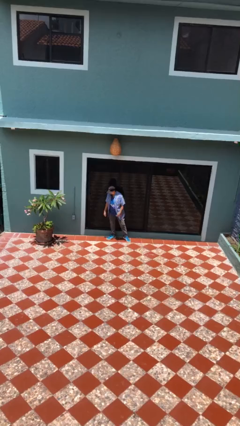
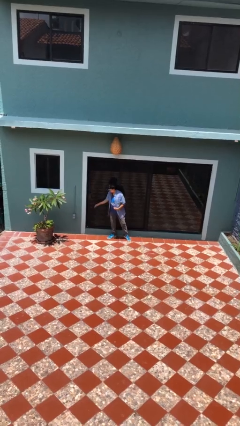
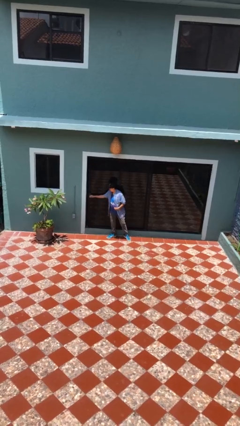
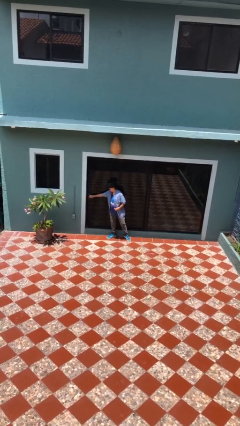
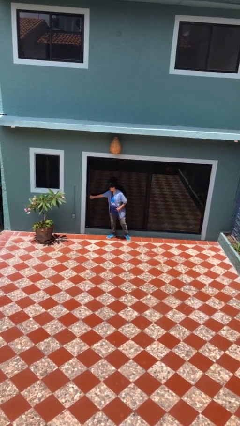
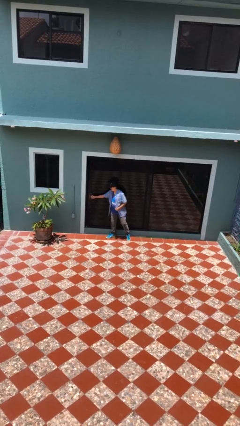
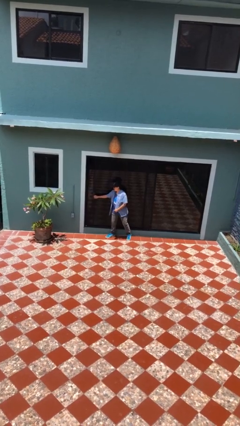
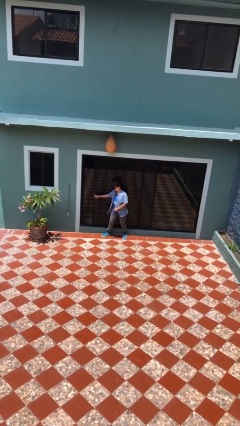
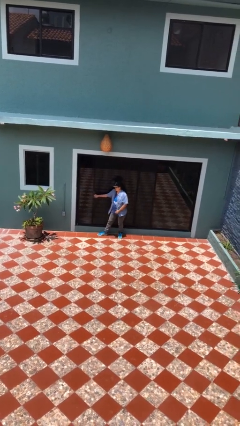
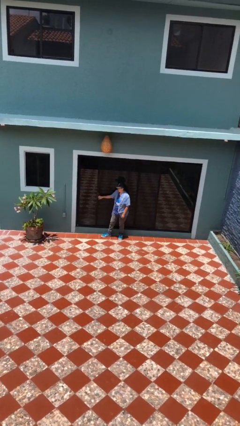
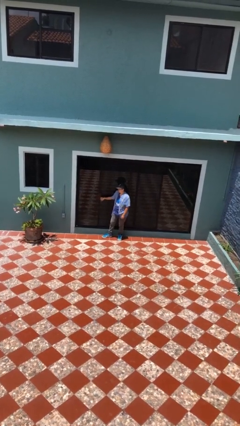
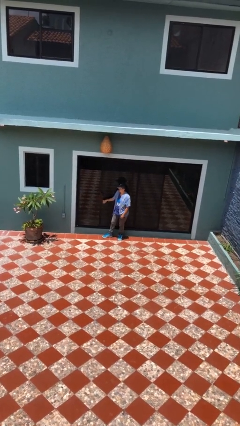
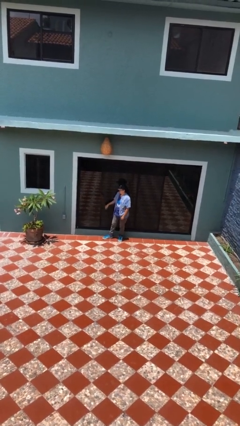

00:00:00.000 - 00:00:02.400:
person opens sliding door

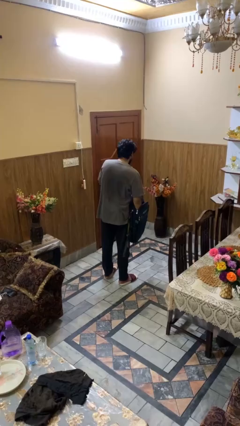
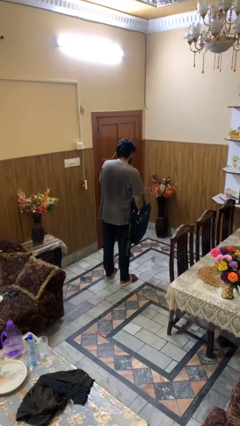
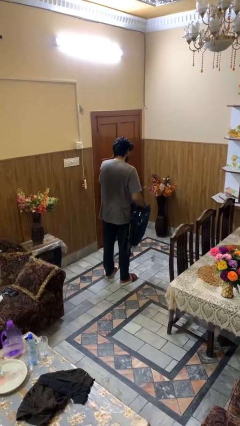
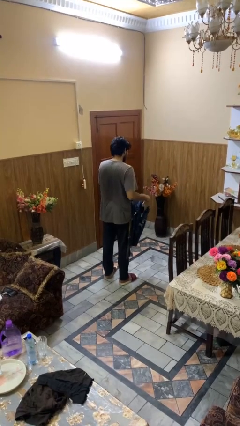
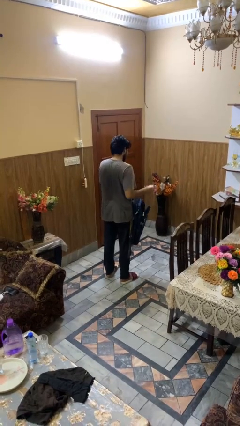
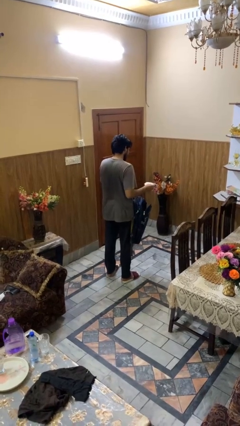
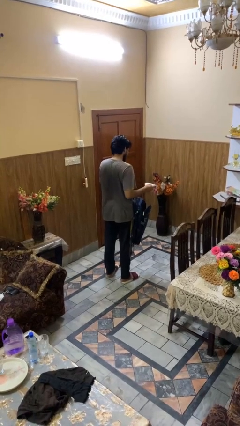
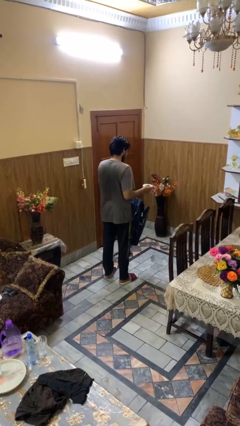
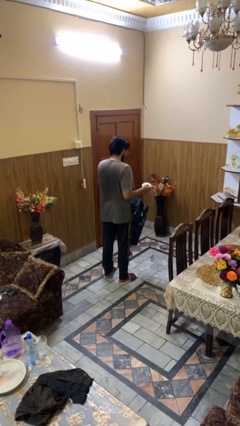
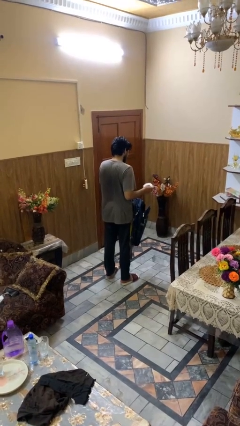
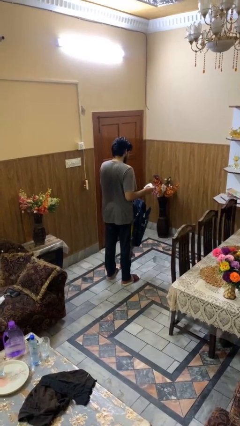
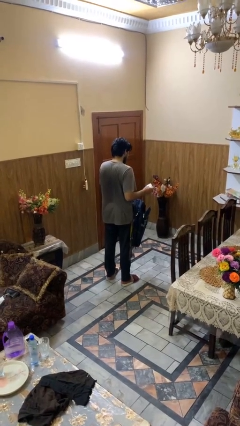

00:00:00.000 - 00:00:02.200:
person takes object from backpack

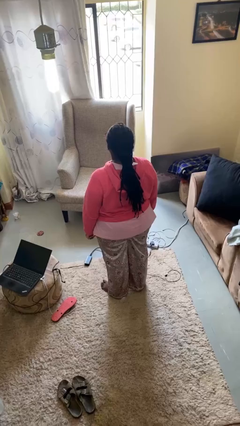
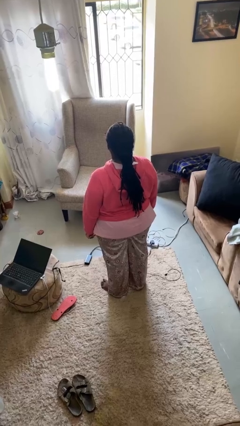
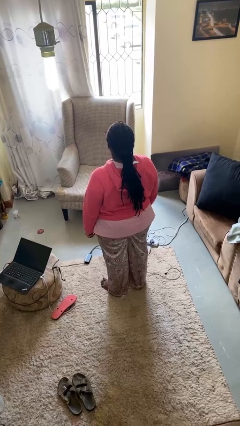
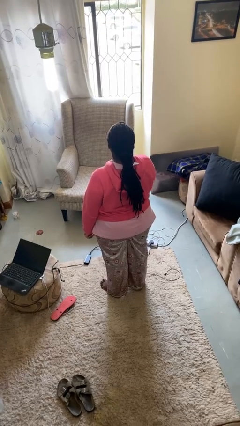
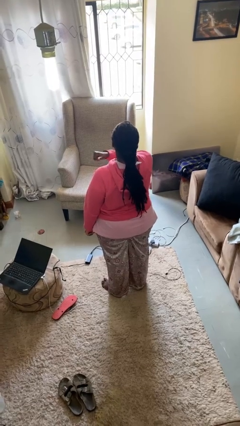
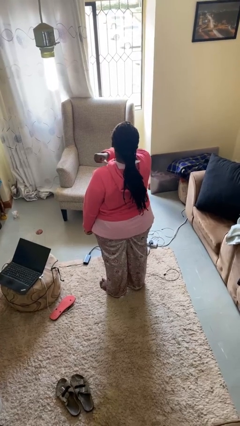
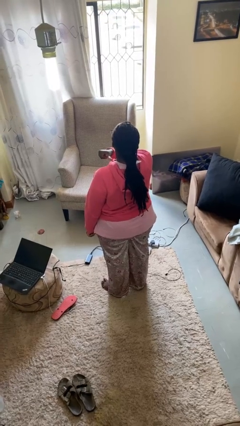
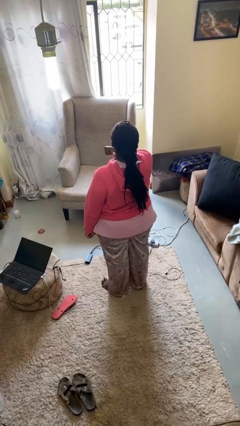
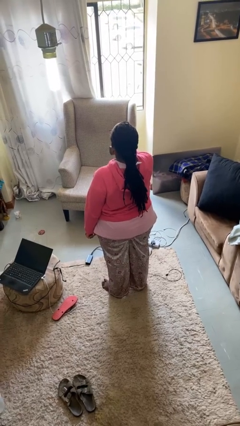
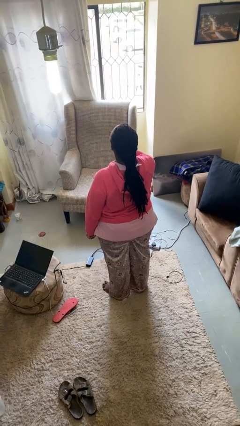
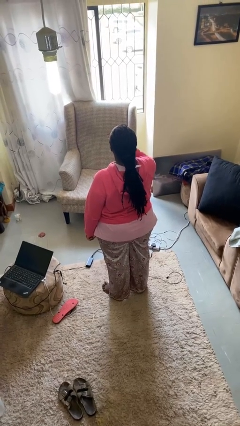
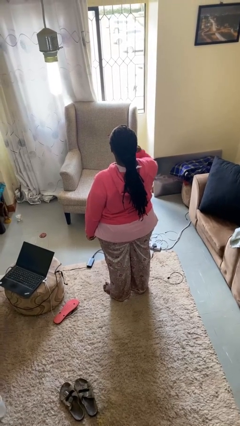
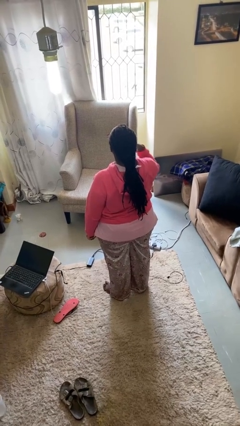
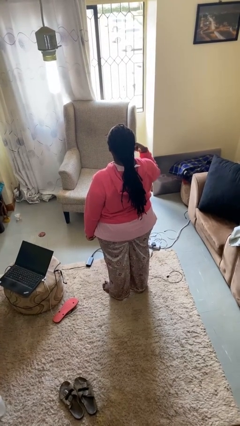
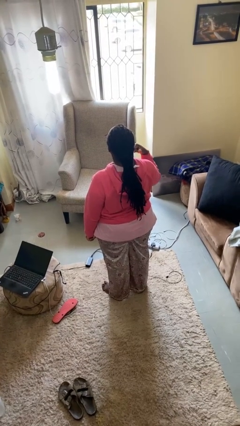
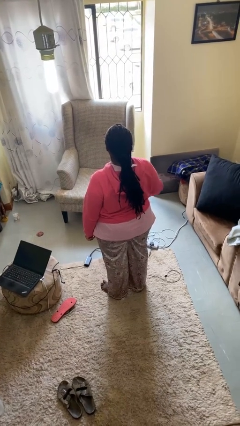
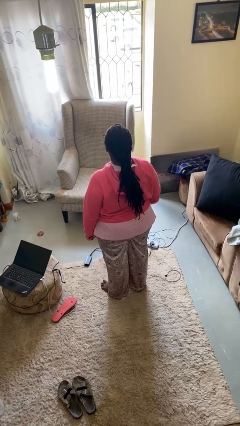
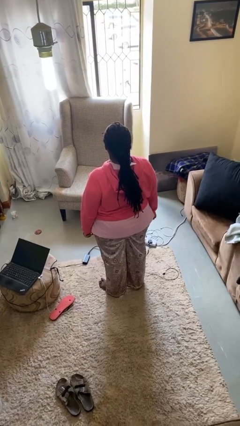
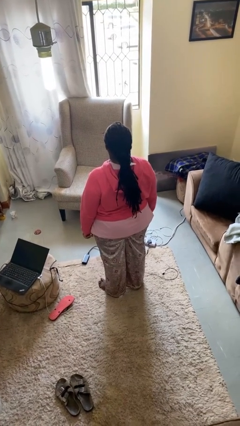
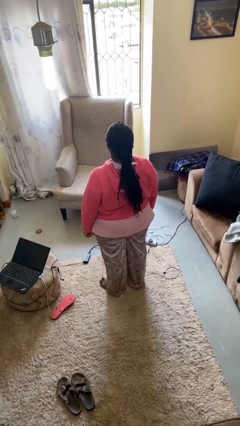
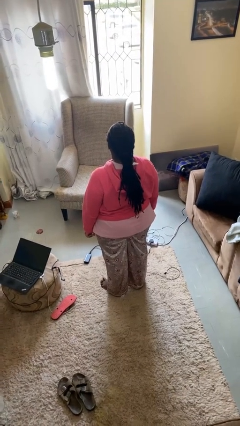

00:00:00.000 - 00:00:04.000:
person gestures cut

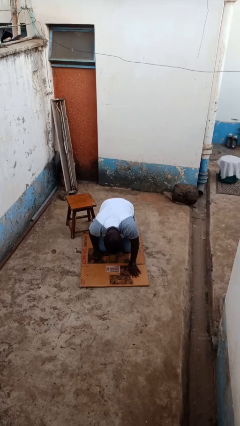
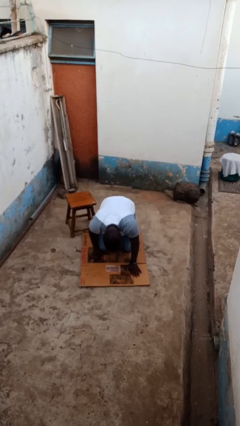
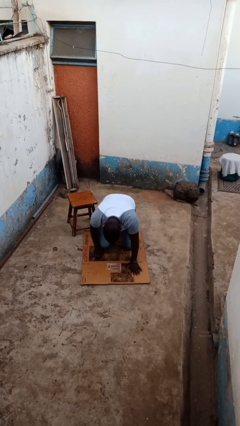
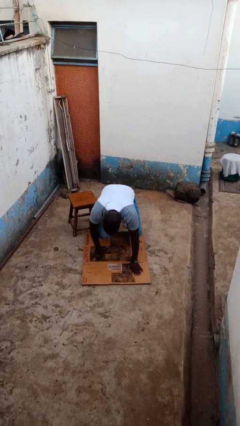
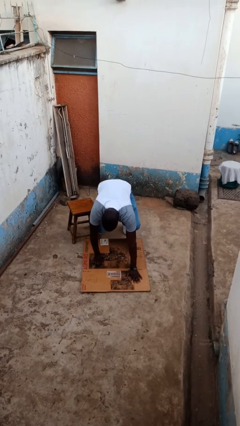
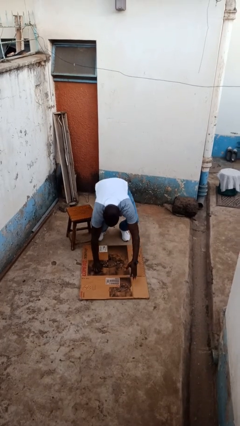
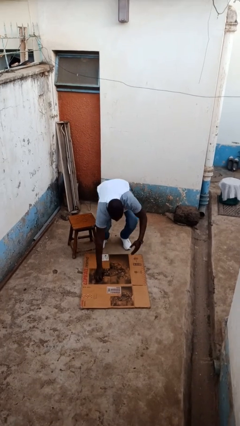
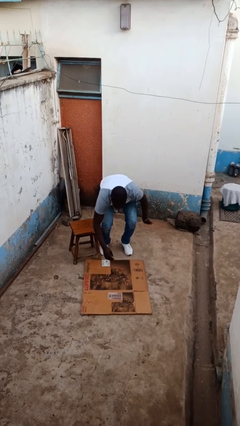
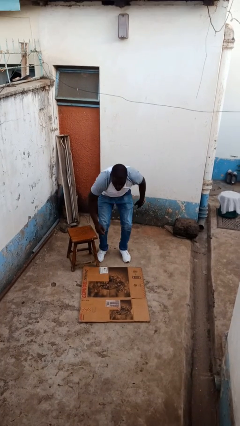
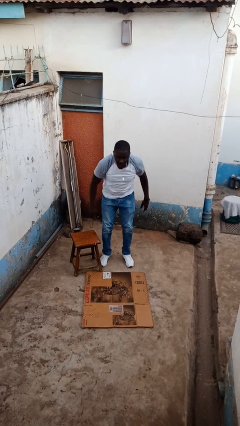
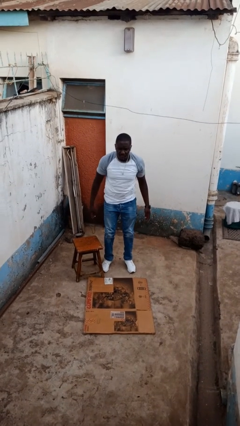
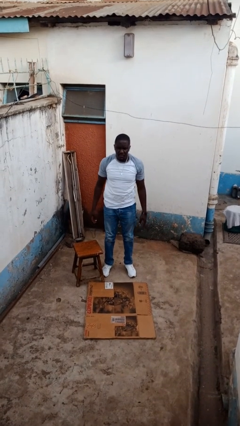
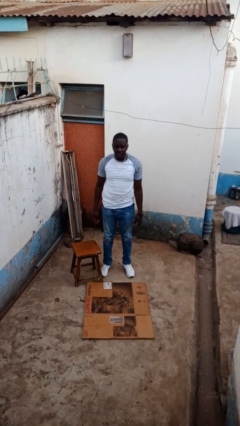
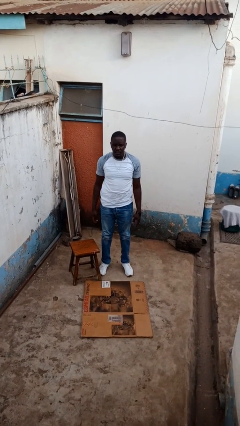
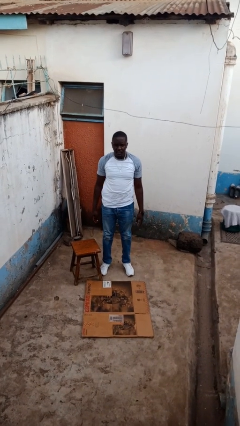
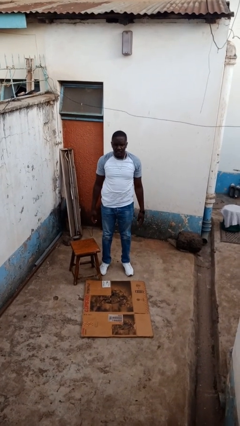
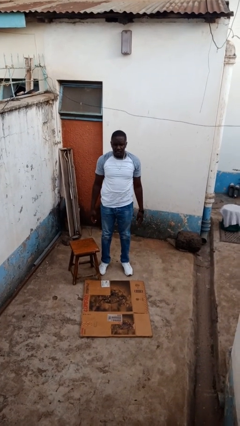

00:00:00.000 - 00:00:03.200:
person stands up from floor

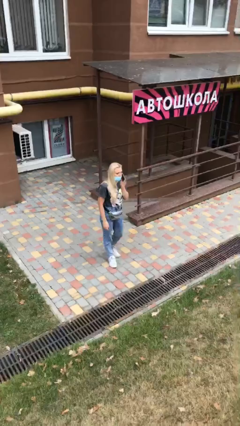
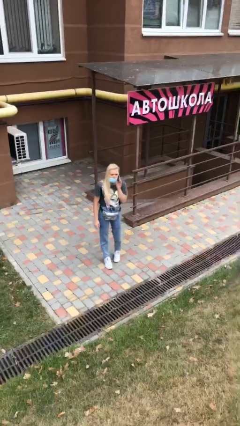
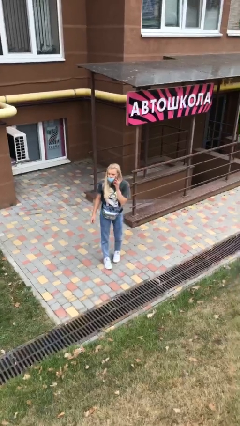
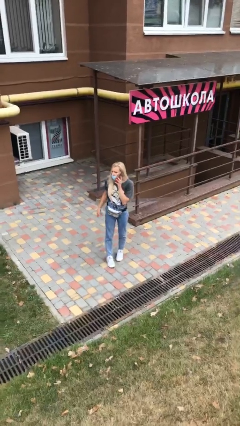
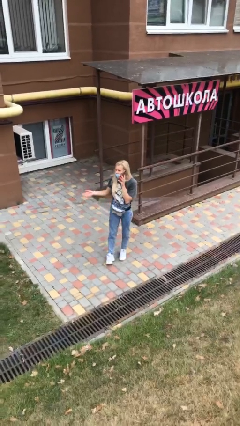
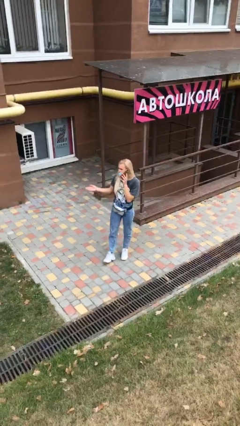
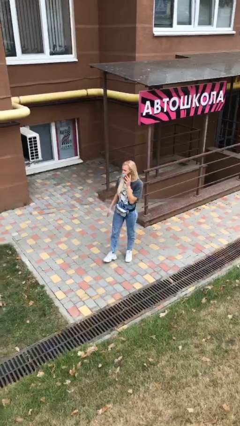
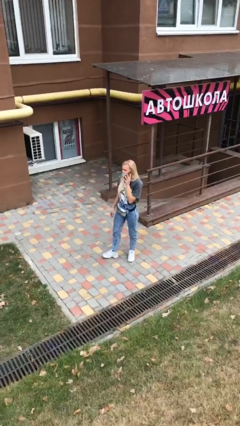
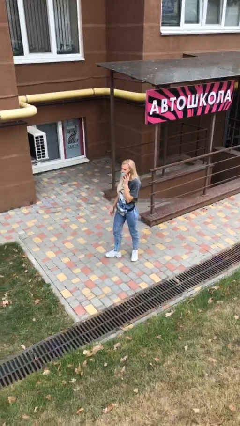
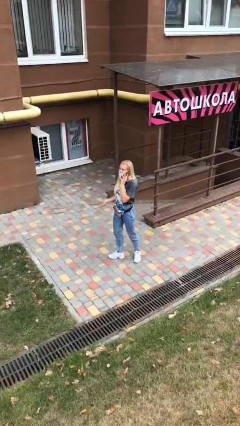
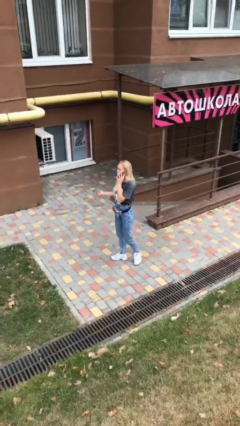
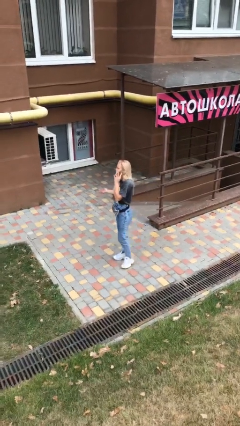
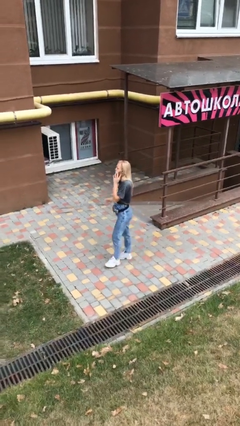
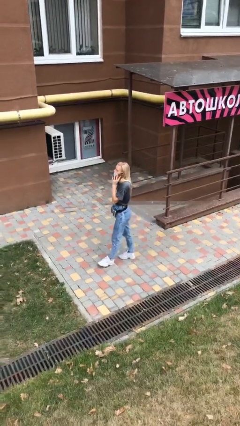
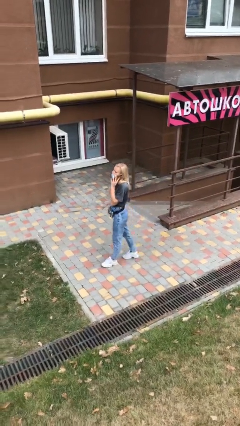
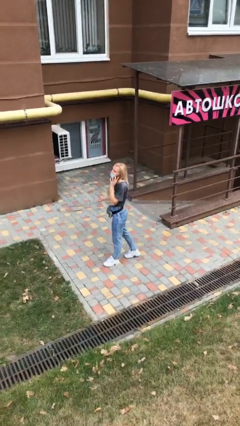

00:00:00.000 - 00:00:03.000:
person talks on phone

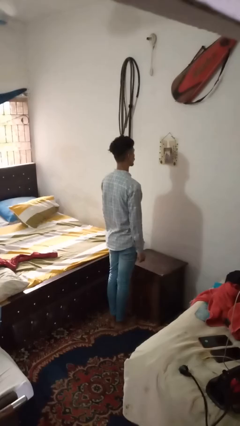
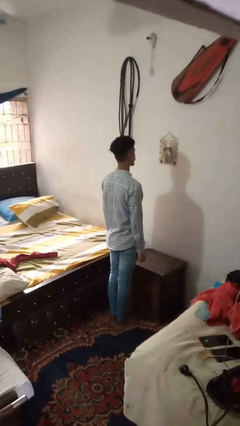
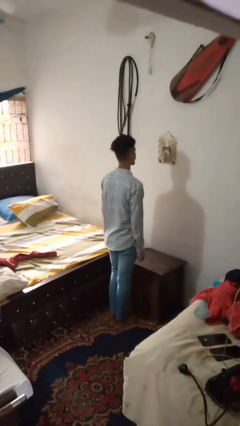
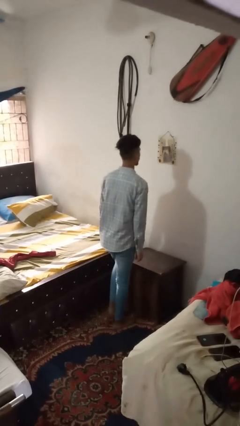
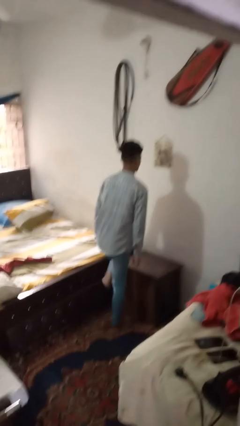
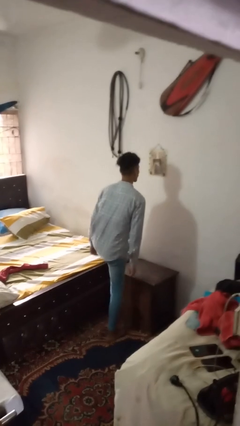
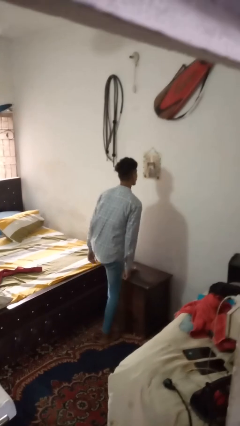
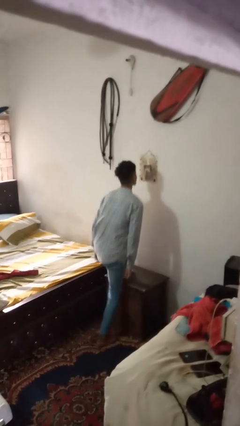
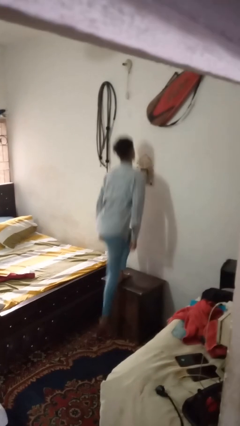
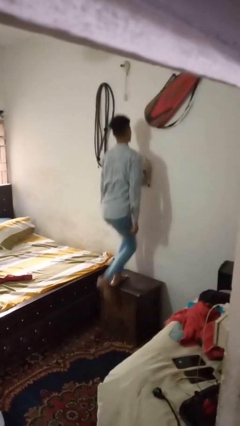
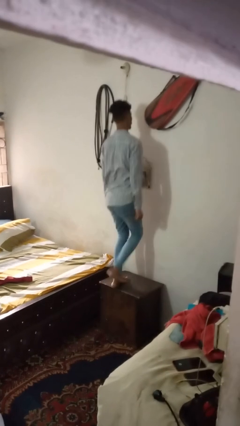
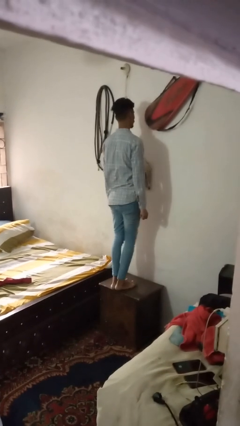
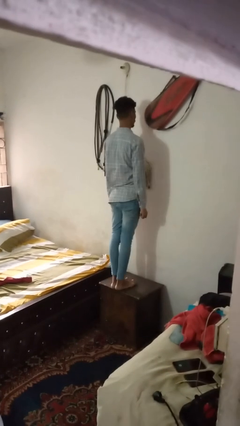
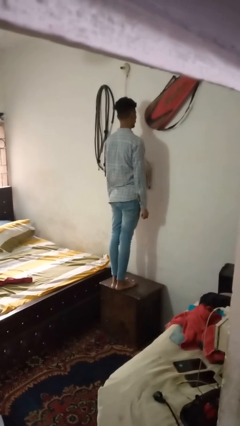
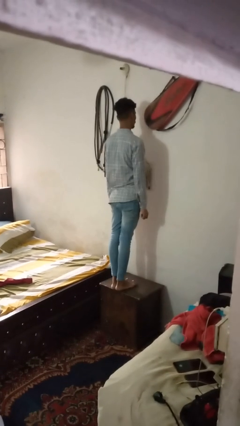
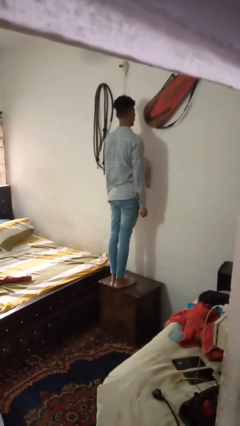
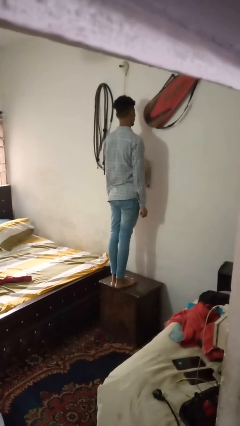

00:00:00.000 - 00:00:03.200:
person climbs on table
